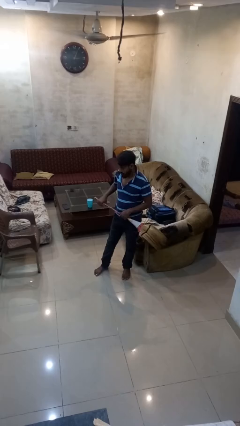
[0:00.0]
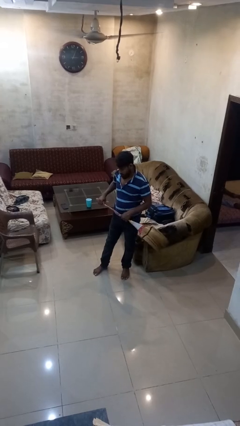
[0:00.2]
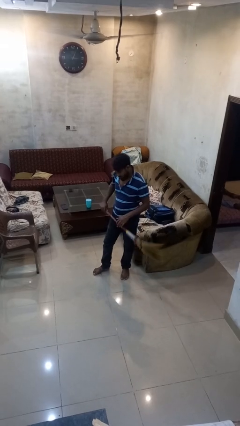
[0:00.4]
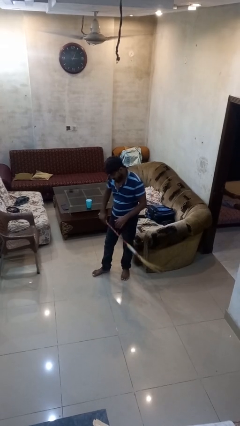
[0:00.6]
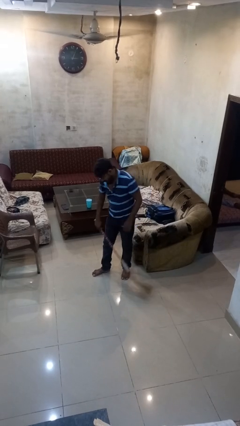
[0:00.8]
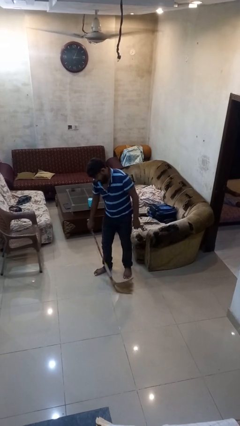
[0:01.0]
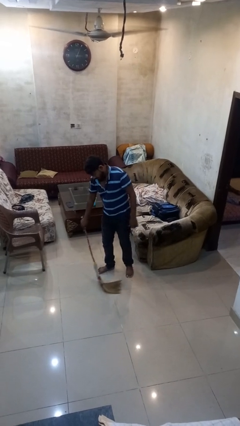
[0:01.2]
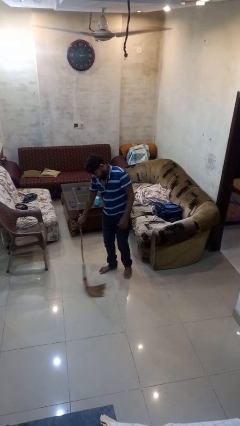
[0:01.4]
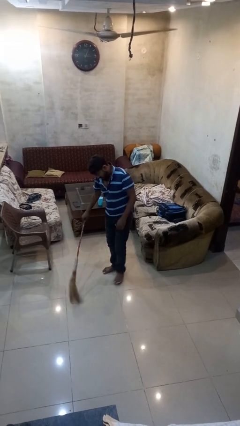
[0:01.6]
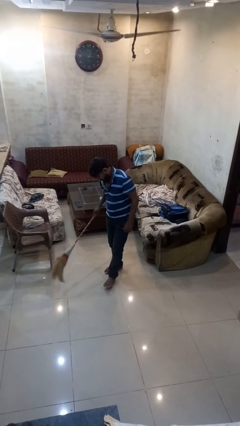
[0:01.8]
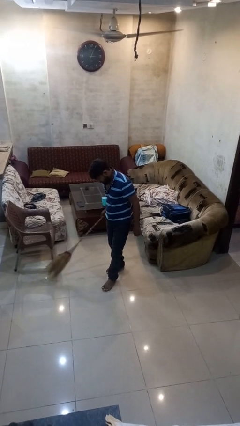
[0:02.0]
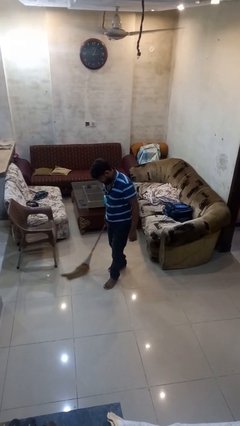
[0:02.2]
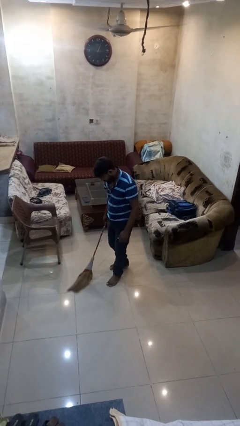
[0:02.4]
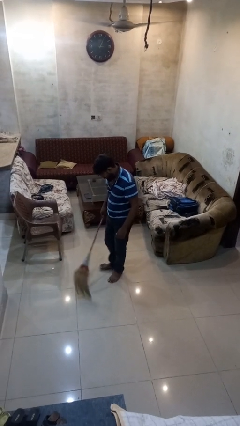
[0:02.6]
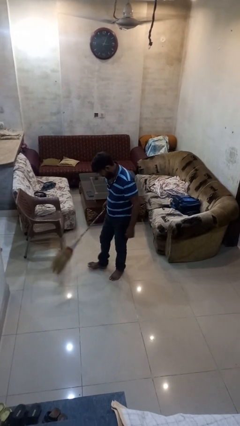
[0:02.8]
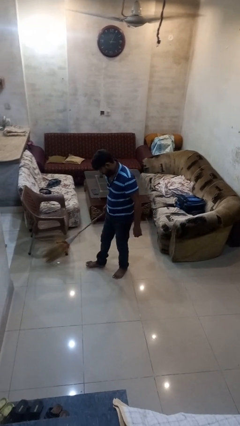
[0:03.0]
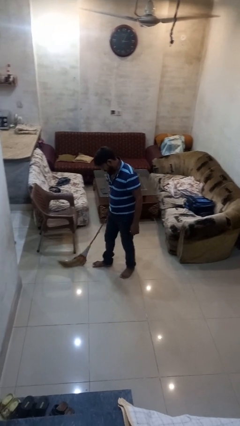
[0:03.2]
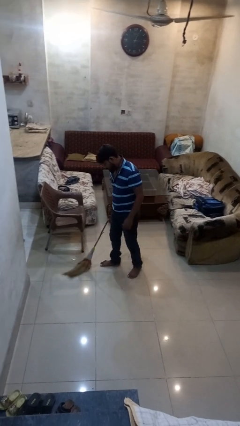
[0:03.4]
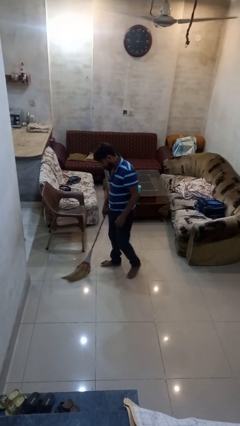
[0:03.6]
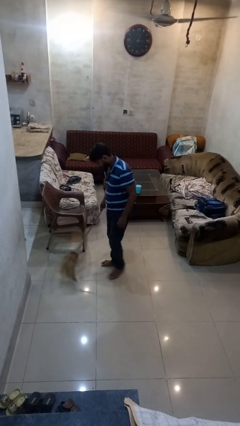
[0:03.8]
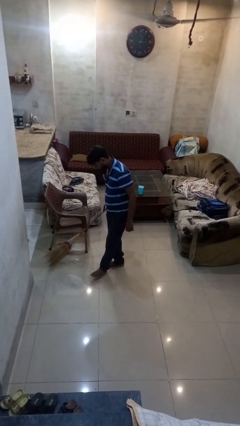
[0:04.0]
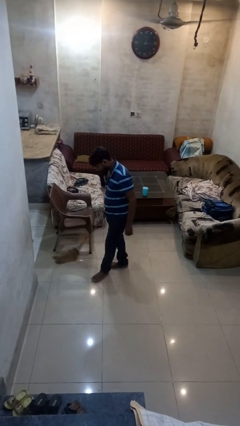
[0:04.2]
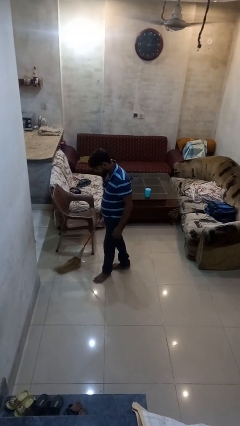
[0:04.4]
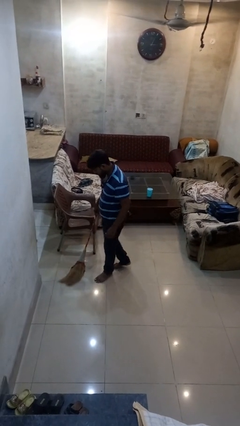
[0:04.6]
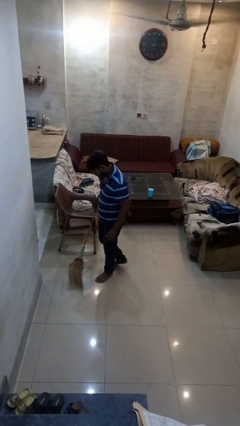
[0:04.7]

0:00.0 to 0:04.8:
person sweeps floor

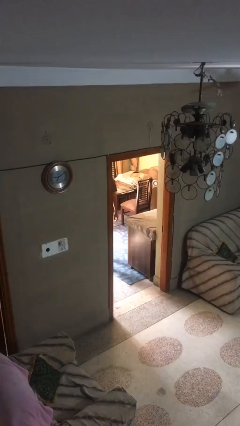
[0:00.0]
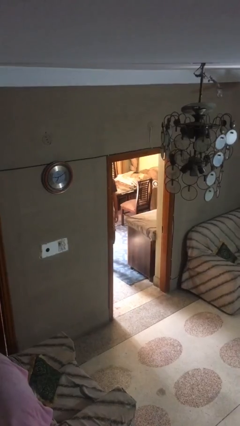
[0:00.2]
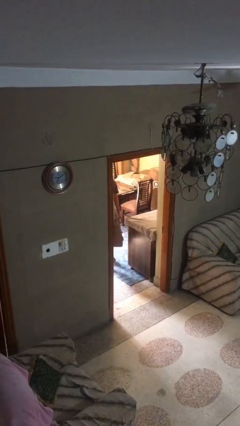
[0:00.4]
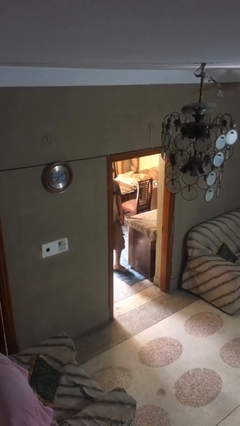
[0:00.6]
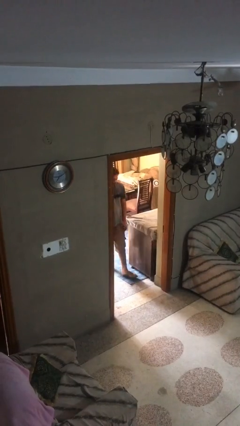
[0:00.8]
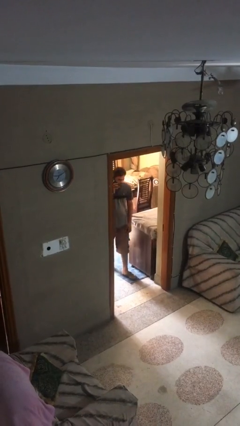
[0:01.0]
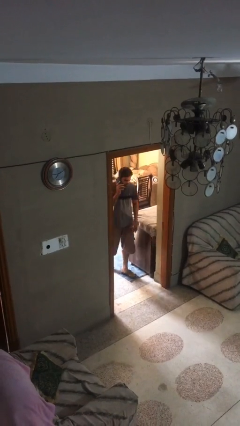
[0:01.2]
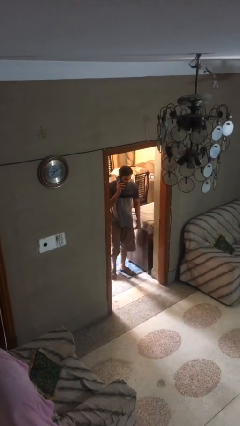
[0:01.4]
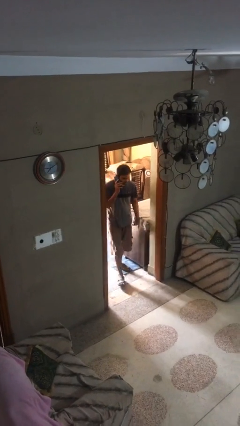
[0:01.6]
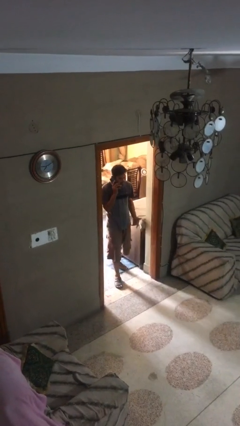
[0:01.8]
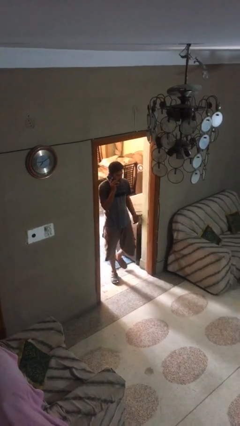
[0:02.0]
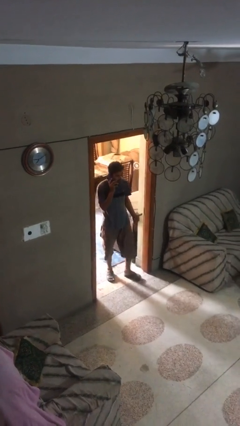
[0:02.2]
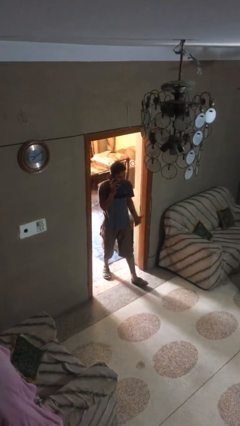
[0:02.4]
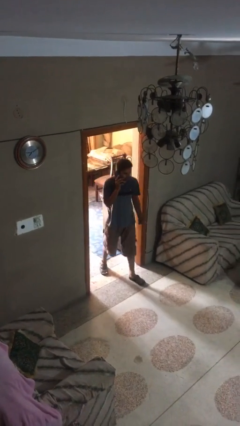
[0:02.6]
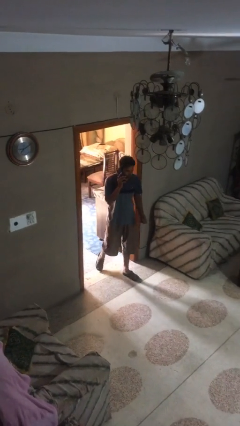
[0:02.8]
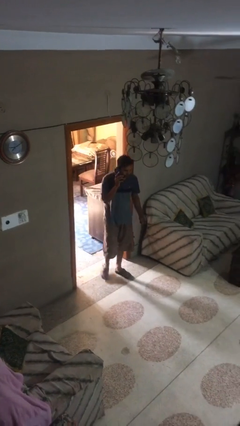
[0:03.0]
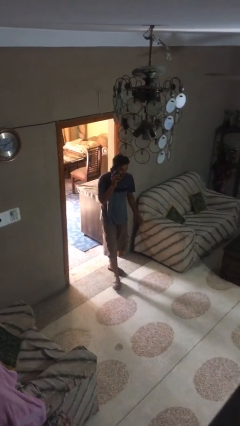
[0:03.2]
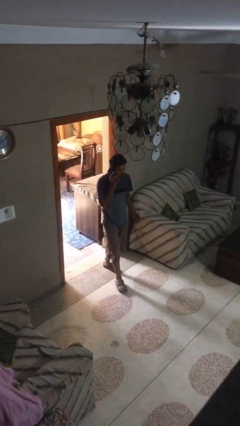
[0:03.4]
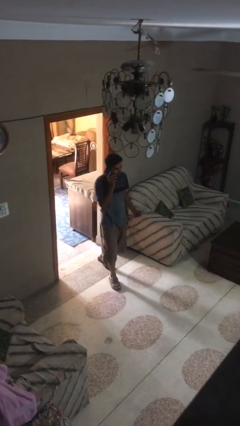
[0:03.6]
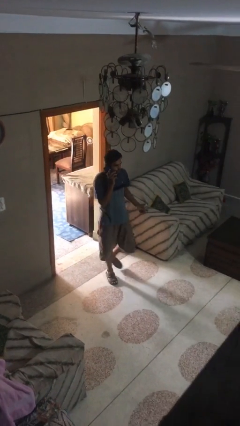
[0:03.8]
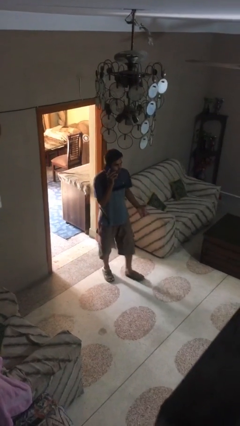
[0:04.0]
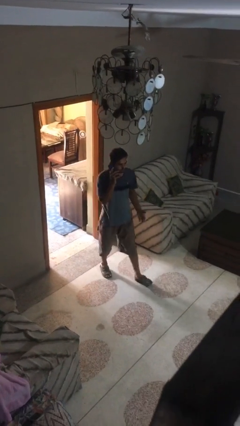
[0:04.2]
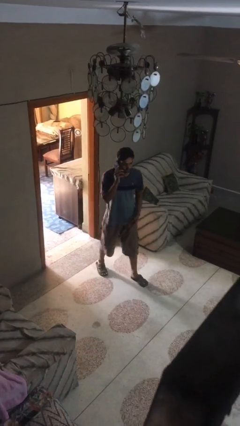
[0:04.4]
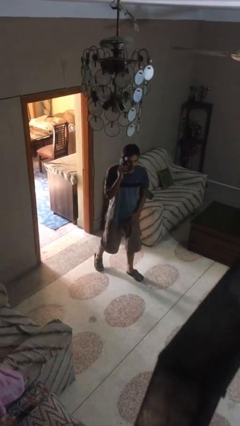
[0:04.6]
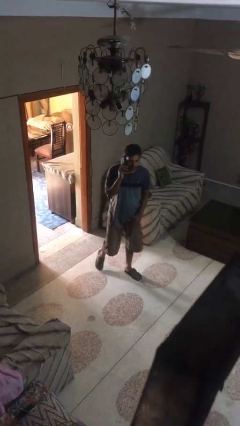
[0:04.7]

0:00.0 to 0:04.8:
person enters scene through structure

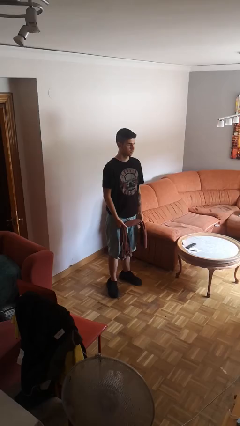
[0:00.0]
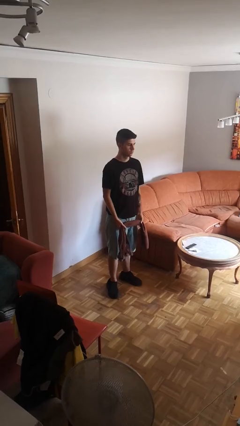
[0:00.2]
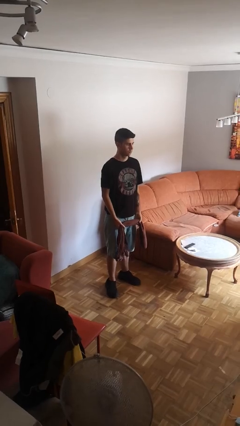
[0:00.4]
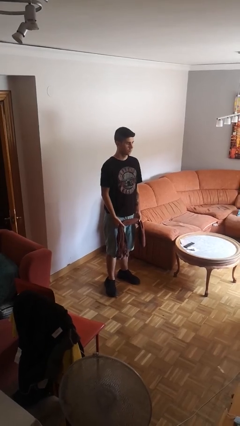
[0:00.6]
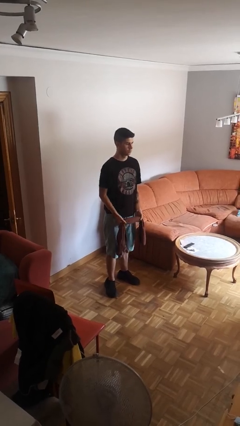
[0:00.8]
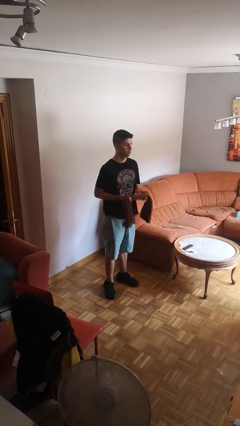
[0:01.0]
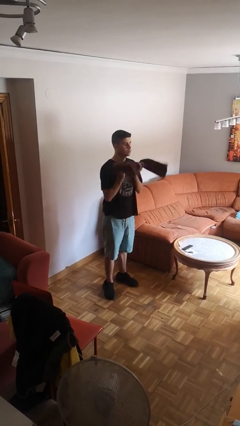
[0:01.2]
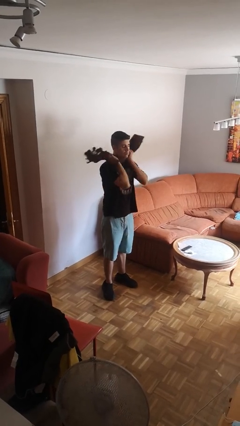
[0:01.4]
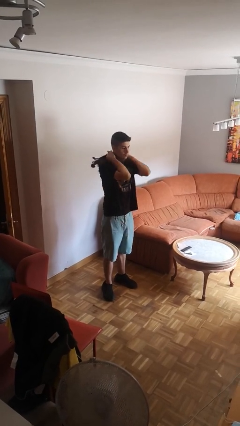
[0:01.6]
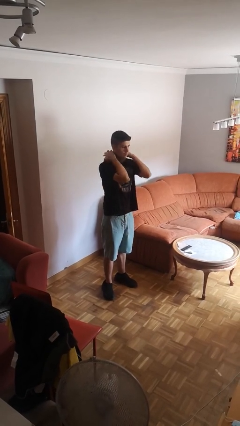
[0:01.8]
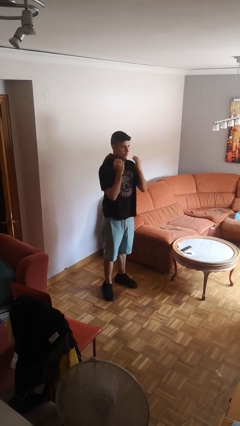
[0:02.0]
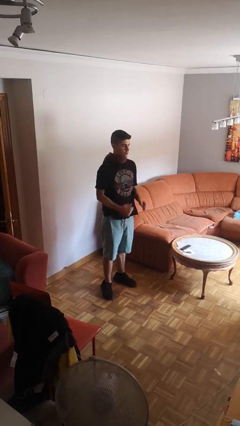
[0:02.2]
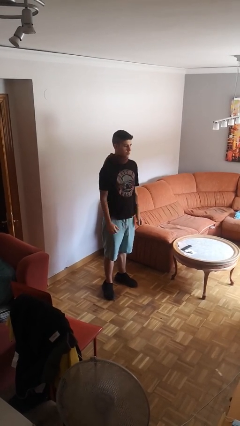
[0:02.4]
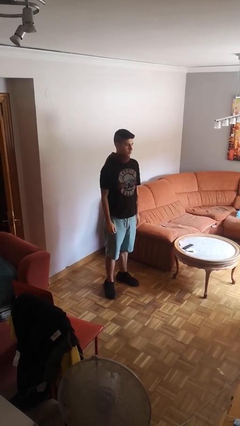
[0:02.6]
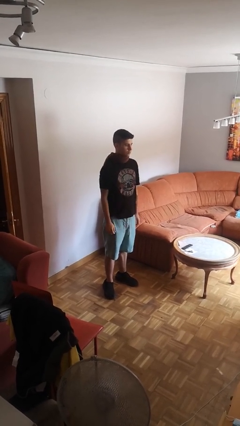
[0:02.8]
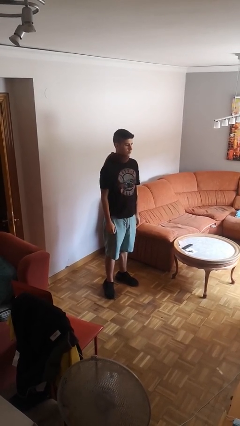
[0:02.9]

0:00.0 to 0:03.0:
person puts on scarf

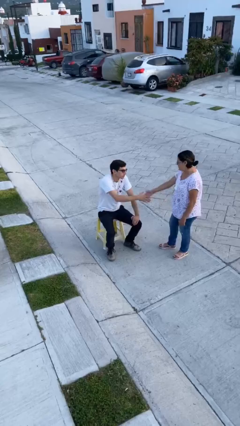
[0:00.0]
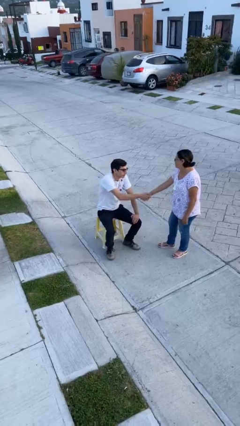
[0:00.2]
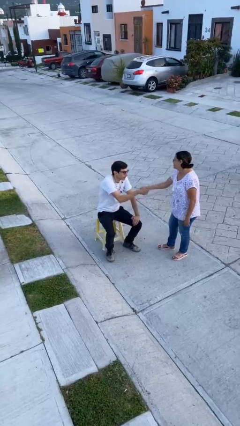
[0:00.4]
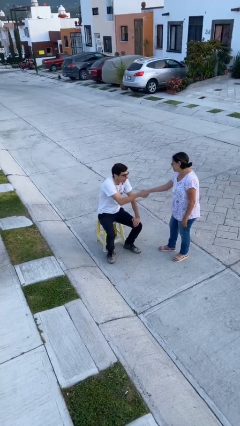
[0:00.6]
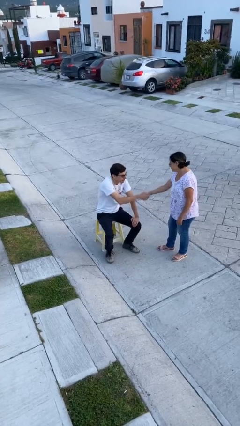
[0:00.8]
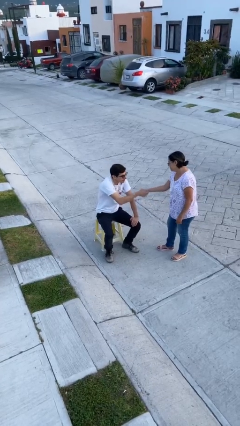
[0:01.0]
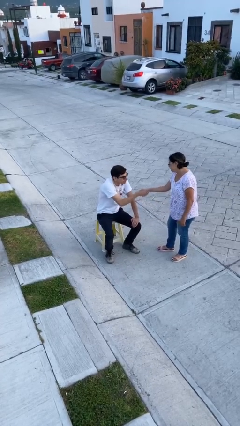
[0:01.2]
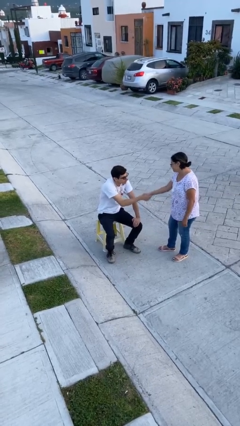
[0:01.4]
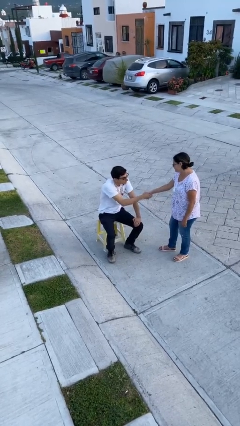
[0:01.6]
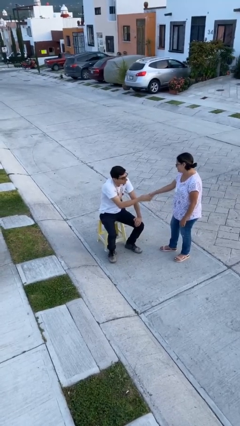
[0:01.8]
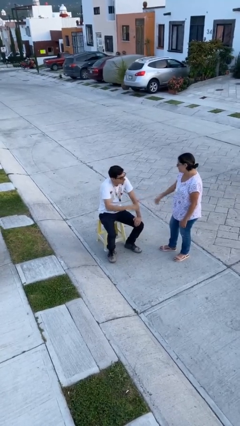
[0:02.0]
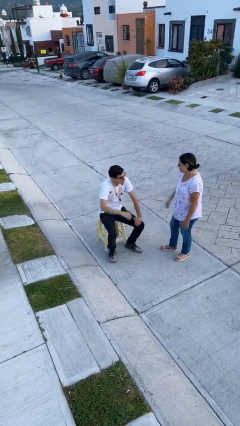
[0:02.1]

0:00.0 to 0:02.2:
person shakes hand

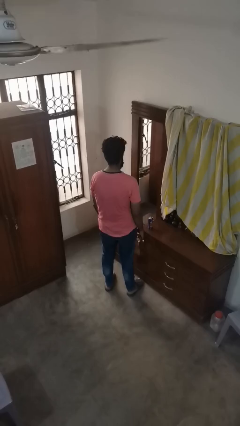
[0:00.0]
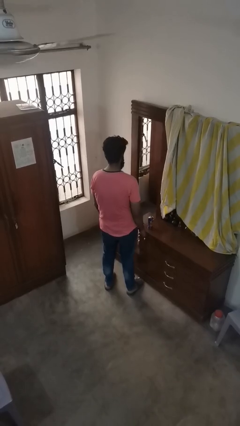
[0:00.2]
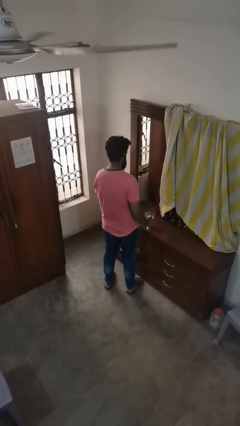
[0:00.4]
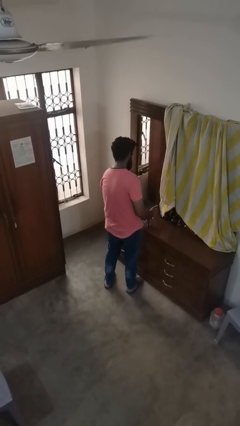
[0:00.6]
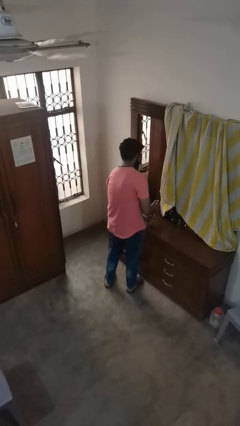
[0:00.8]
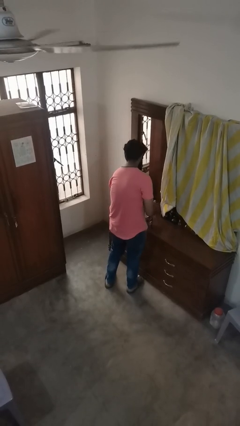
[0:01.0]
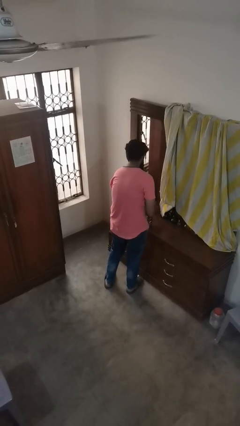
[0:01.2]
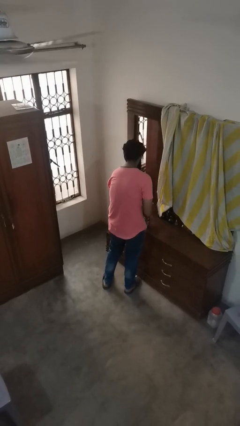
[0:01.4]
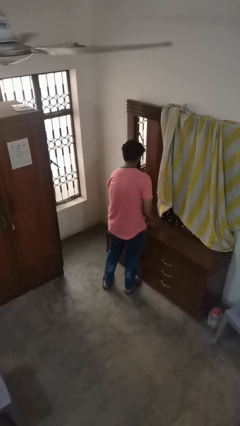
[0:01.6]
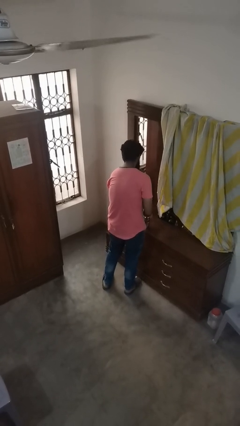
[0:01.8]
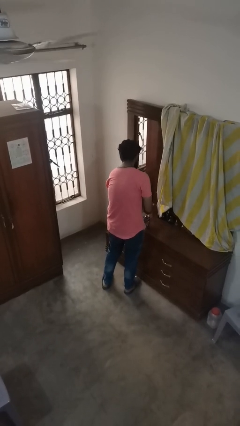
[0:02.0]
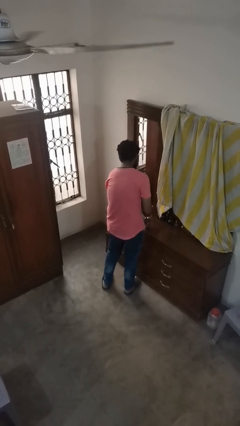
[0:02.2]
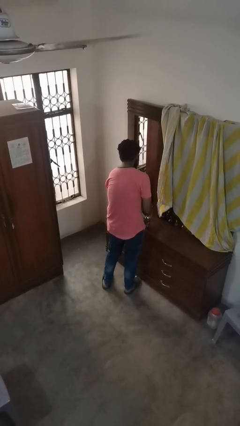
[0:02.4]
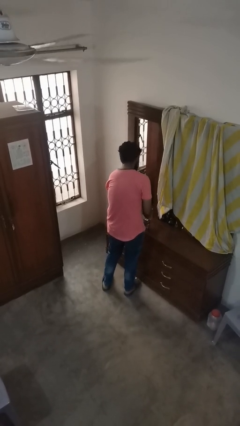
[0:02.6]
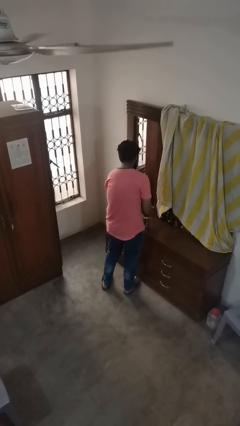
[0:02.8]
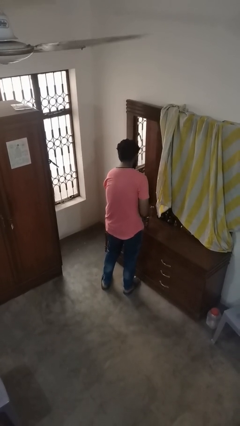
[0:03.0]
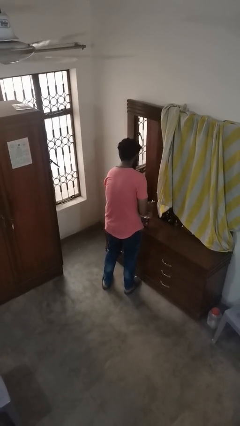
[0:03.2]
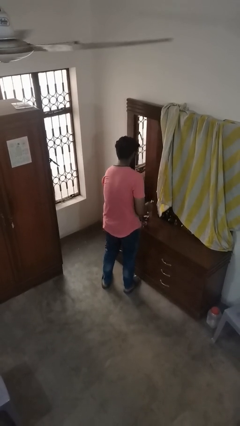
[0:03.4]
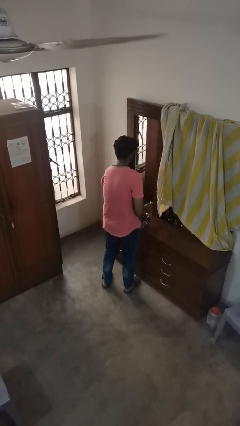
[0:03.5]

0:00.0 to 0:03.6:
person opens can with can opener
